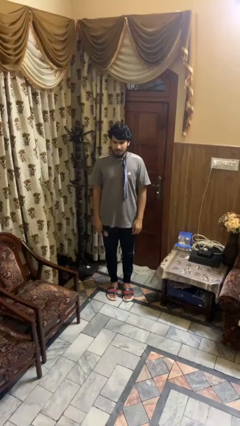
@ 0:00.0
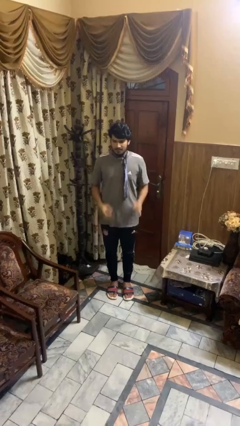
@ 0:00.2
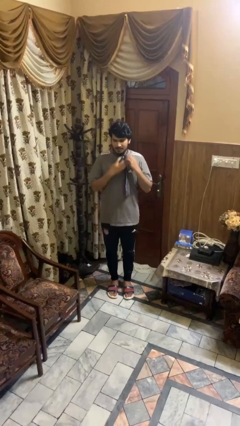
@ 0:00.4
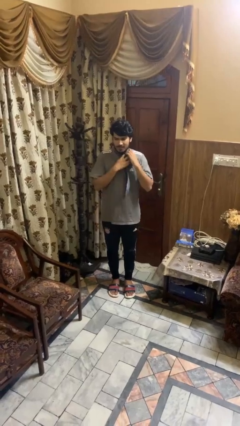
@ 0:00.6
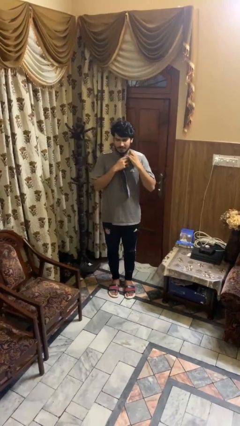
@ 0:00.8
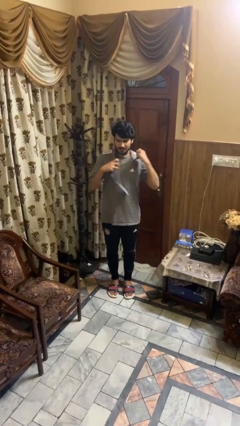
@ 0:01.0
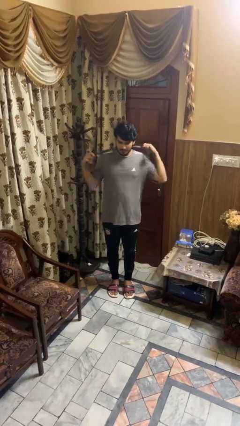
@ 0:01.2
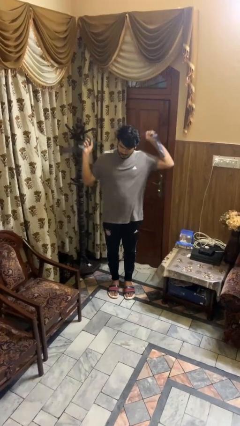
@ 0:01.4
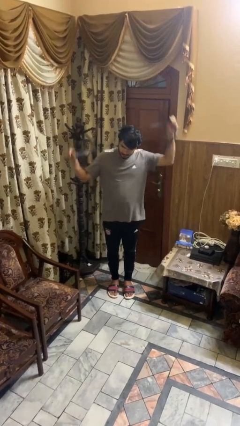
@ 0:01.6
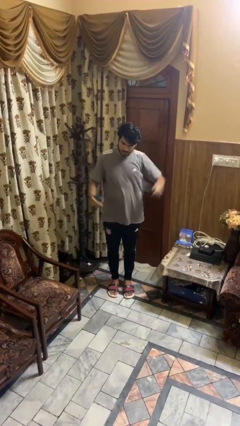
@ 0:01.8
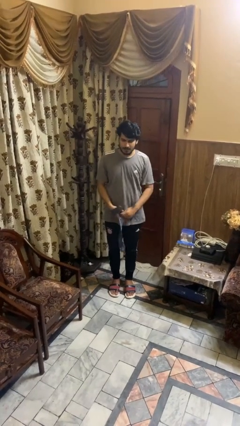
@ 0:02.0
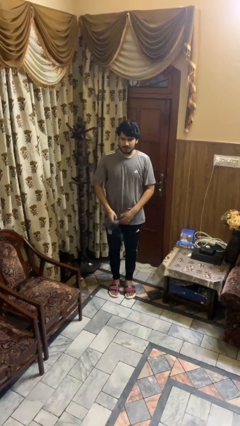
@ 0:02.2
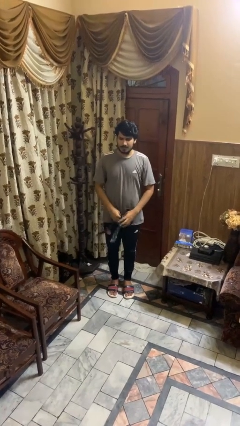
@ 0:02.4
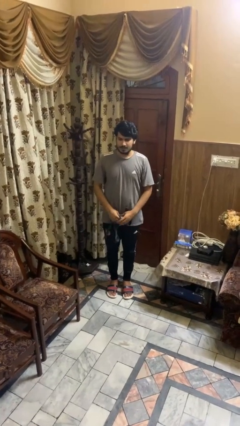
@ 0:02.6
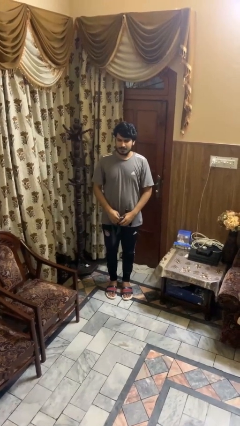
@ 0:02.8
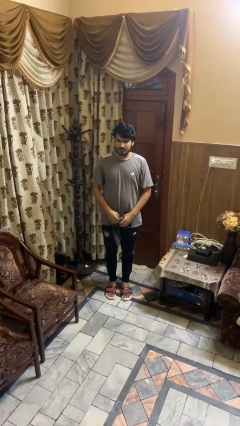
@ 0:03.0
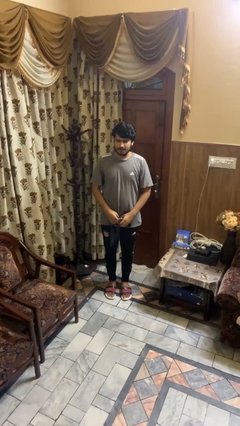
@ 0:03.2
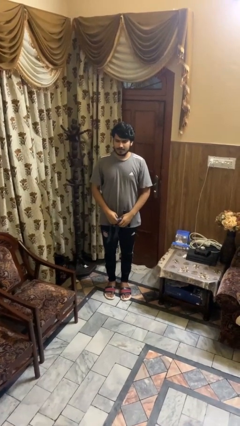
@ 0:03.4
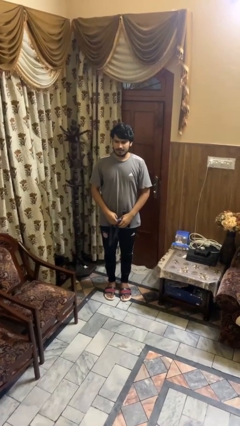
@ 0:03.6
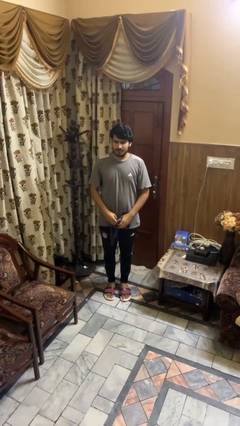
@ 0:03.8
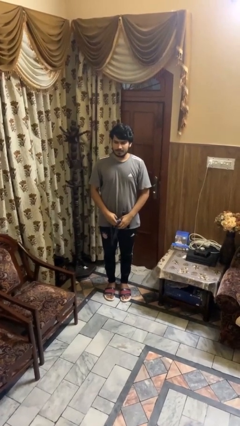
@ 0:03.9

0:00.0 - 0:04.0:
person takes off necktie

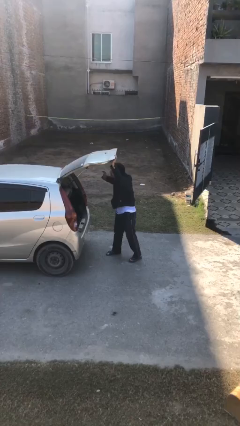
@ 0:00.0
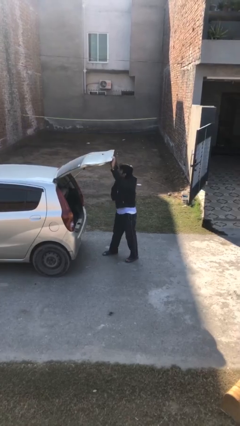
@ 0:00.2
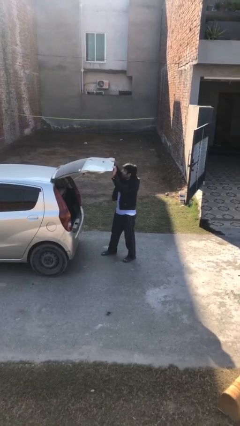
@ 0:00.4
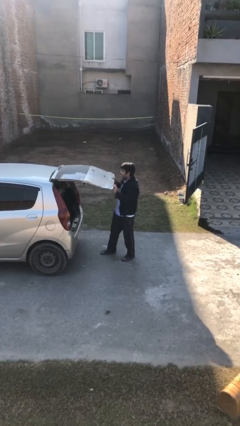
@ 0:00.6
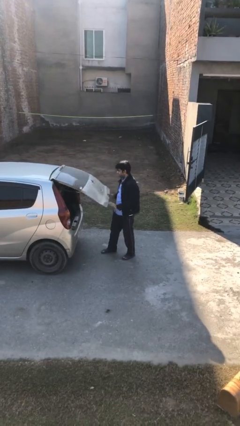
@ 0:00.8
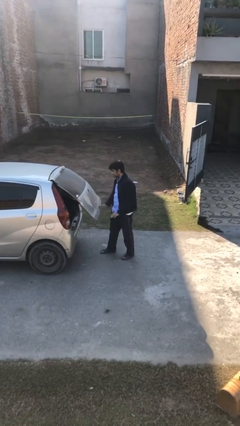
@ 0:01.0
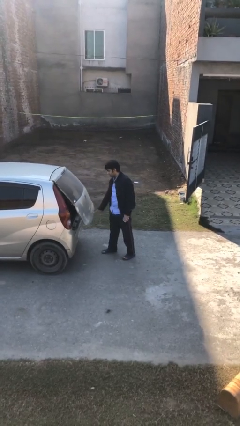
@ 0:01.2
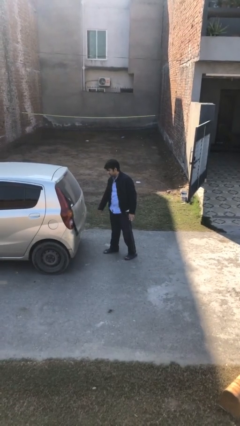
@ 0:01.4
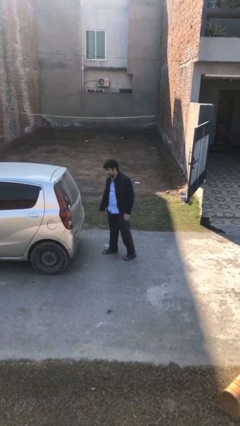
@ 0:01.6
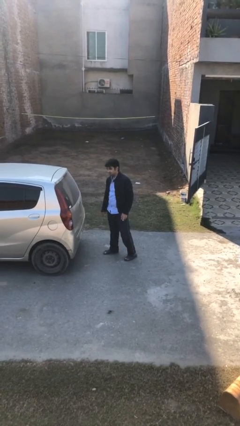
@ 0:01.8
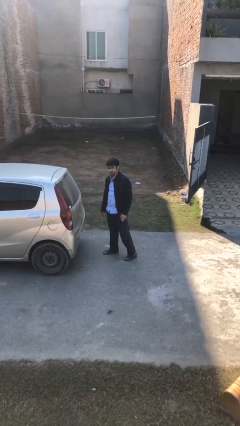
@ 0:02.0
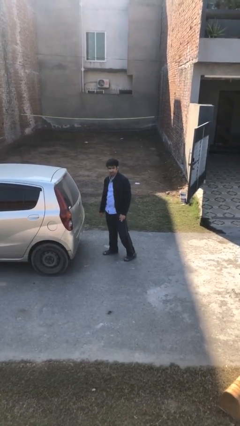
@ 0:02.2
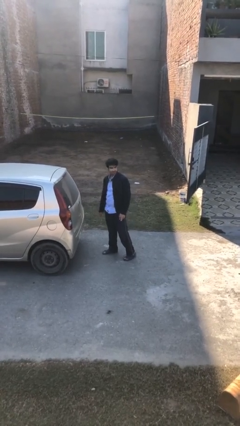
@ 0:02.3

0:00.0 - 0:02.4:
person closes car trunk

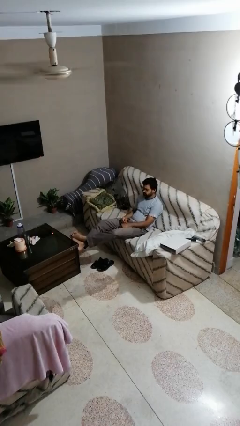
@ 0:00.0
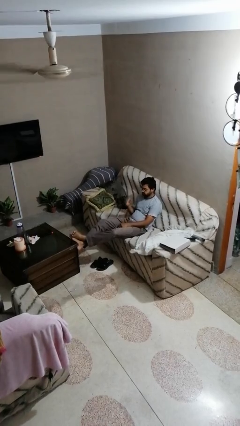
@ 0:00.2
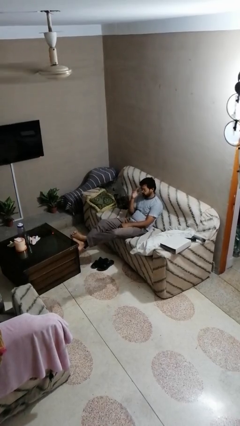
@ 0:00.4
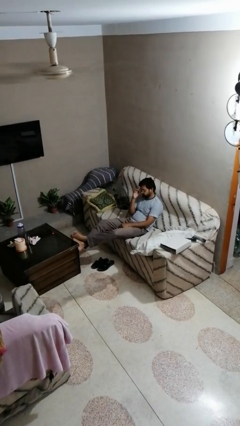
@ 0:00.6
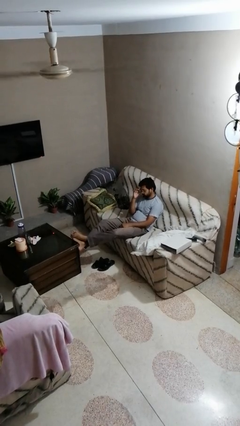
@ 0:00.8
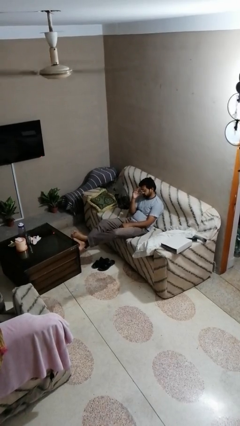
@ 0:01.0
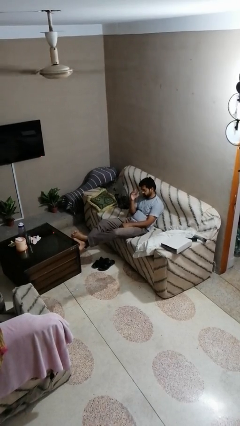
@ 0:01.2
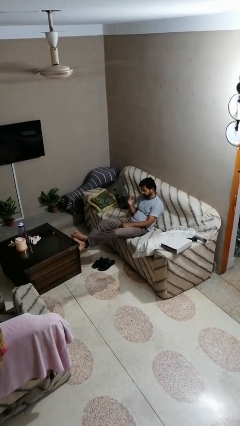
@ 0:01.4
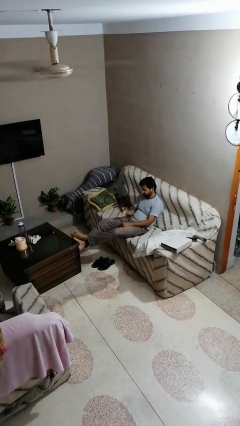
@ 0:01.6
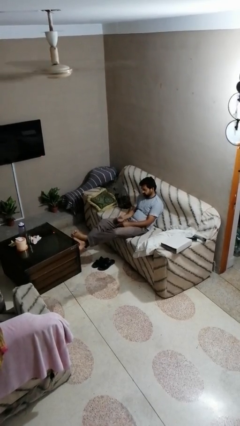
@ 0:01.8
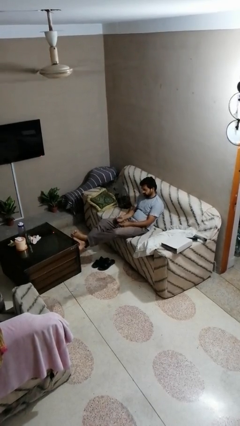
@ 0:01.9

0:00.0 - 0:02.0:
person takes off glasses

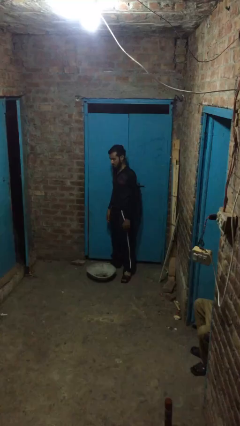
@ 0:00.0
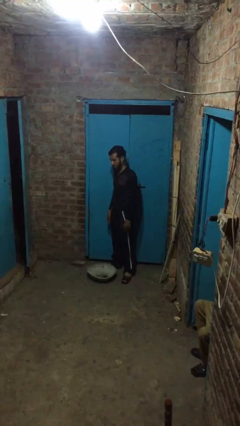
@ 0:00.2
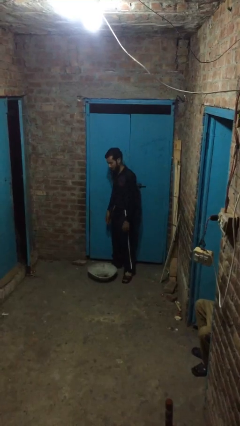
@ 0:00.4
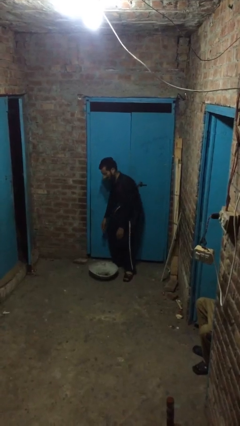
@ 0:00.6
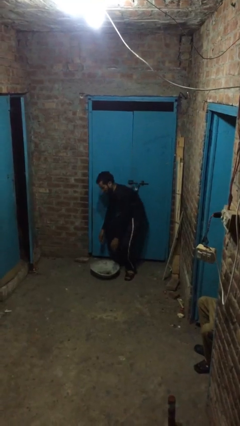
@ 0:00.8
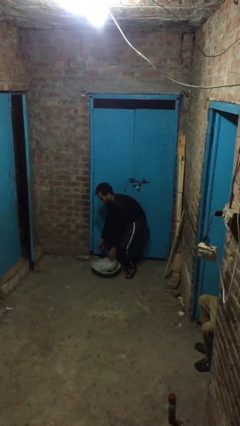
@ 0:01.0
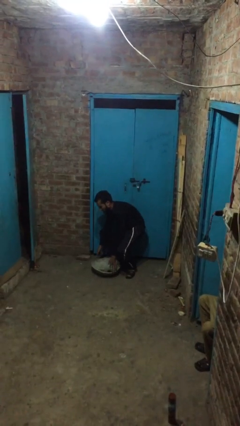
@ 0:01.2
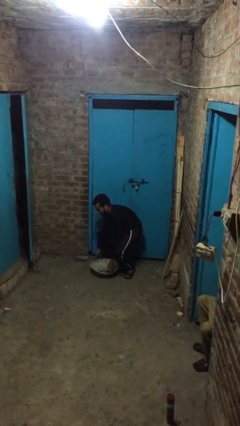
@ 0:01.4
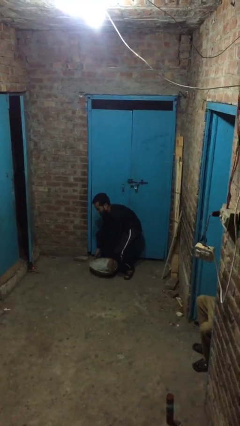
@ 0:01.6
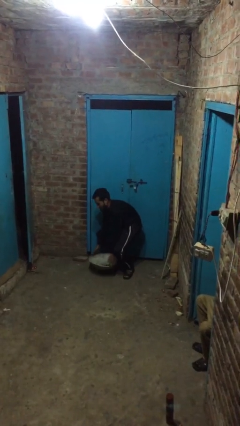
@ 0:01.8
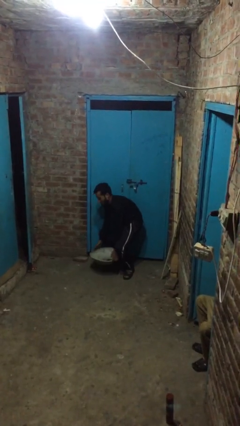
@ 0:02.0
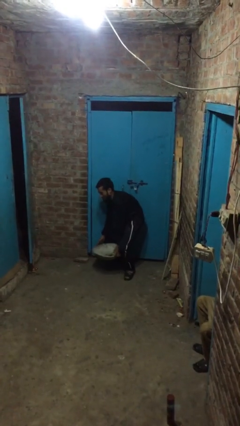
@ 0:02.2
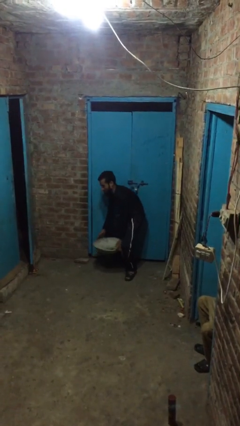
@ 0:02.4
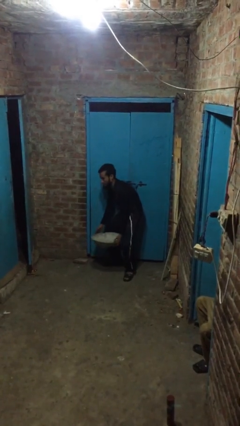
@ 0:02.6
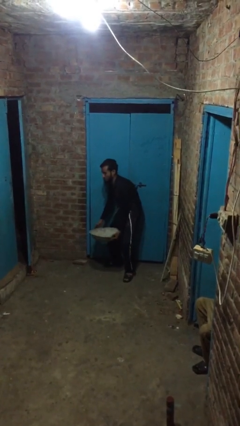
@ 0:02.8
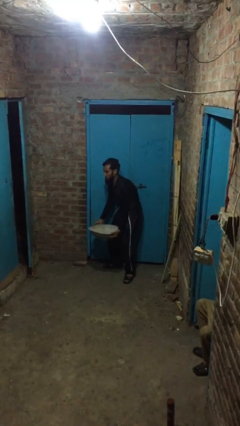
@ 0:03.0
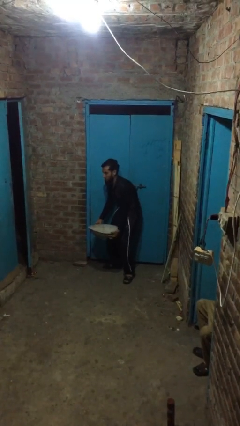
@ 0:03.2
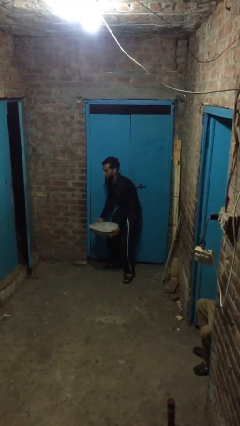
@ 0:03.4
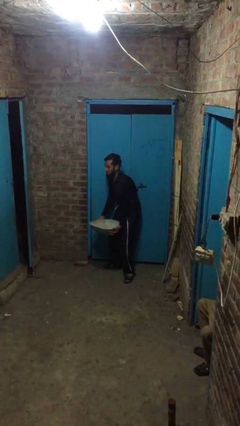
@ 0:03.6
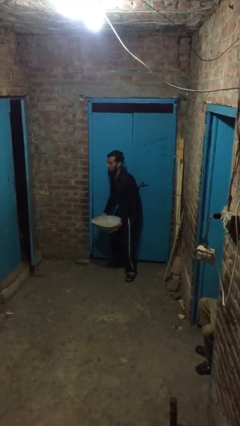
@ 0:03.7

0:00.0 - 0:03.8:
person picks up object from floor

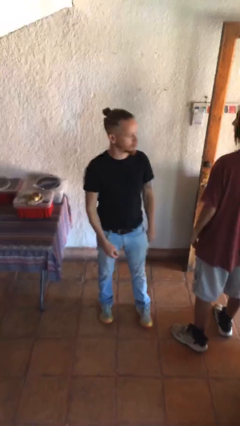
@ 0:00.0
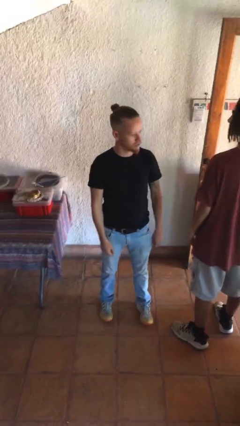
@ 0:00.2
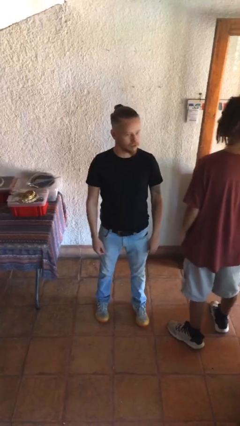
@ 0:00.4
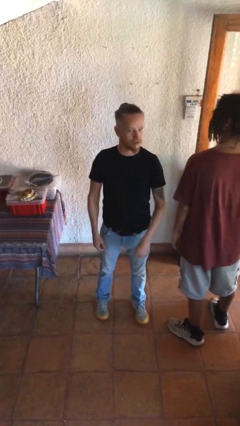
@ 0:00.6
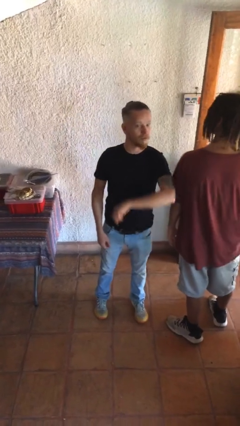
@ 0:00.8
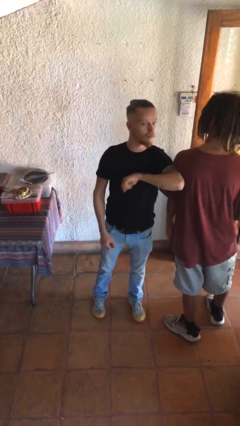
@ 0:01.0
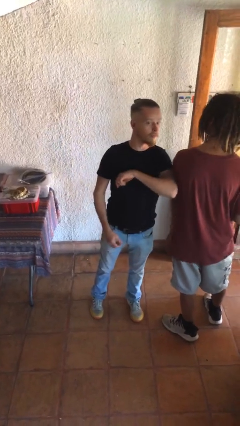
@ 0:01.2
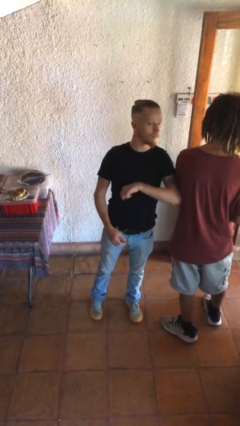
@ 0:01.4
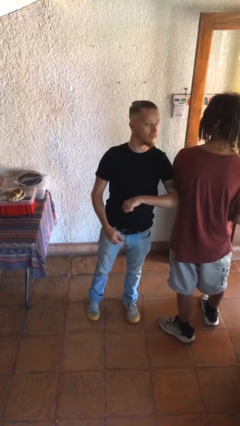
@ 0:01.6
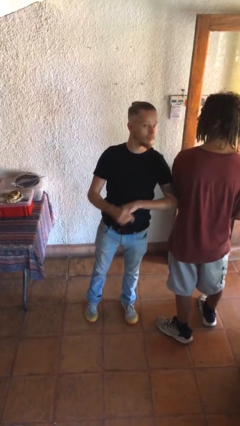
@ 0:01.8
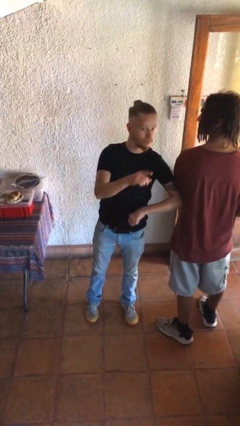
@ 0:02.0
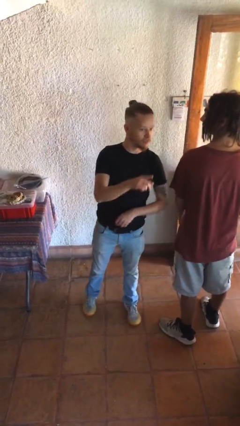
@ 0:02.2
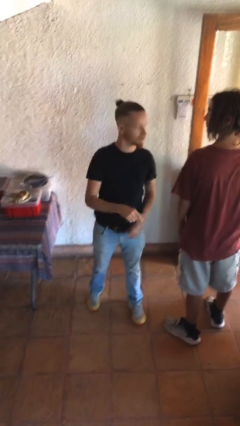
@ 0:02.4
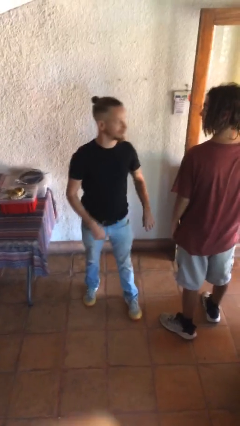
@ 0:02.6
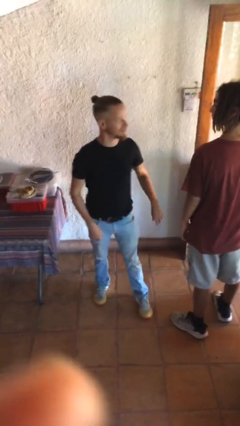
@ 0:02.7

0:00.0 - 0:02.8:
person nudges person with elbow

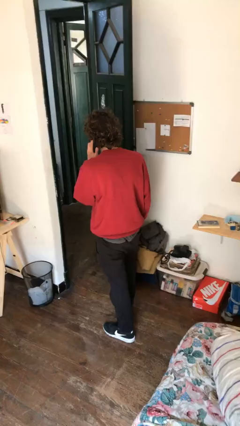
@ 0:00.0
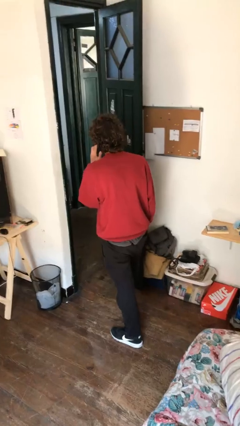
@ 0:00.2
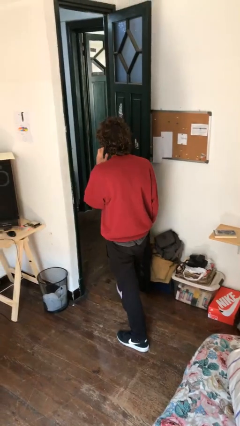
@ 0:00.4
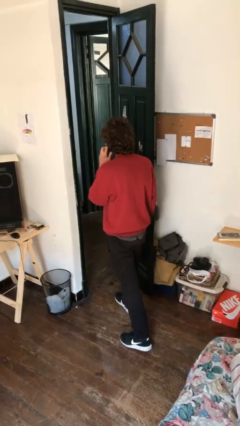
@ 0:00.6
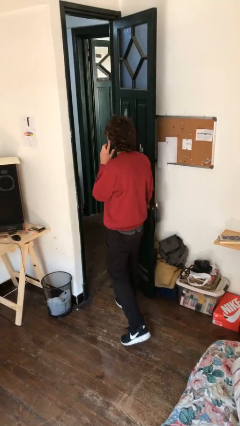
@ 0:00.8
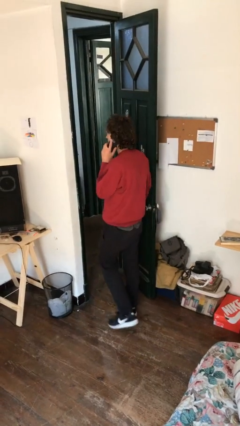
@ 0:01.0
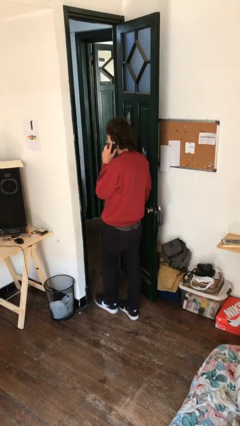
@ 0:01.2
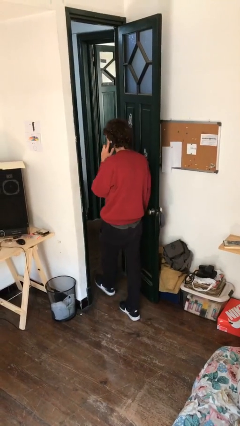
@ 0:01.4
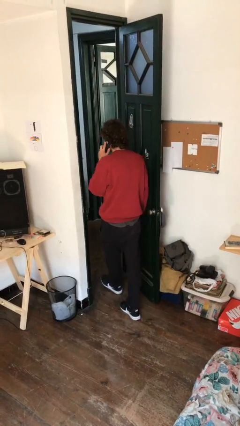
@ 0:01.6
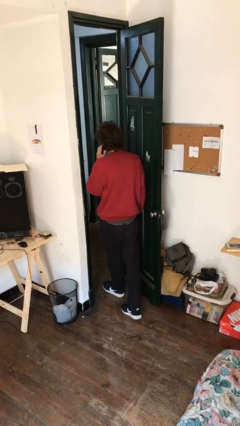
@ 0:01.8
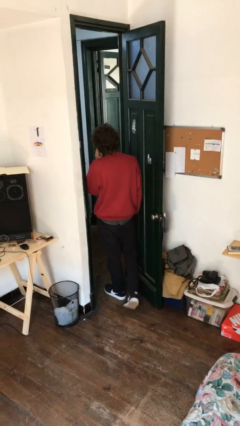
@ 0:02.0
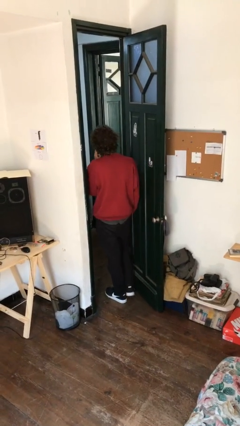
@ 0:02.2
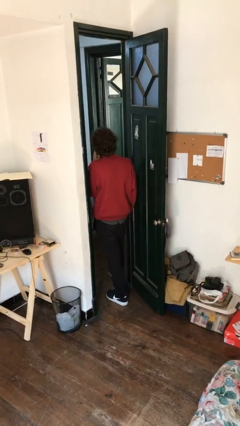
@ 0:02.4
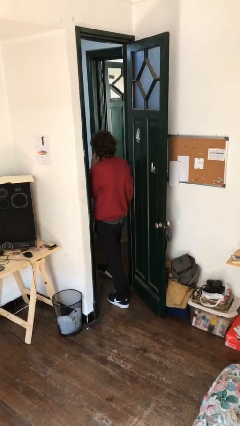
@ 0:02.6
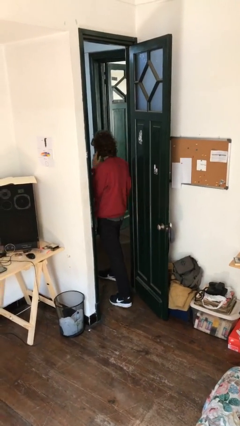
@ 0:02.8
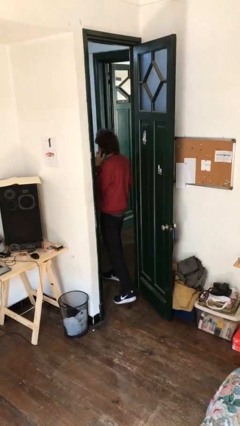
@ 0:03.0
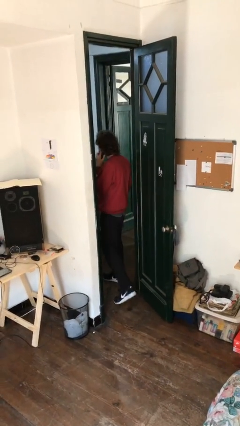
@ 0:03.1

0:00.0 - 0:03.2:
person exits scene through structure
